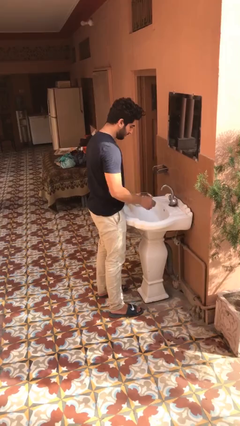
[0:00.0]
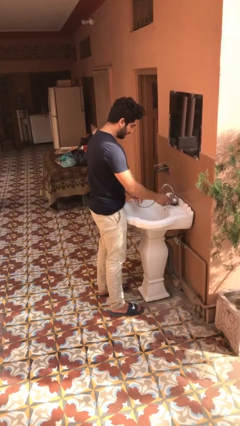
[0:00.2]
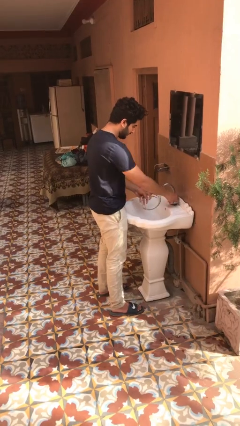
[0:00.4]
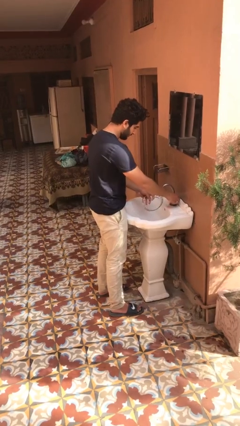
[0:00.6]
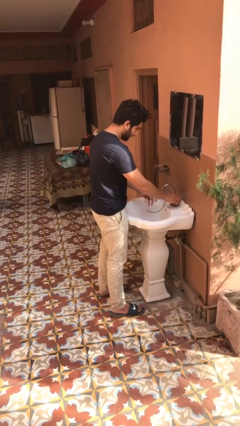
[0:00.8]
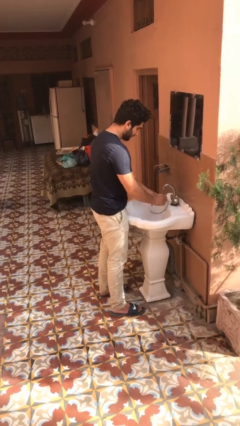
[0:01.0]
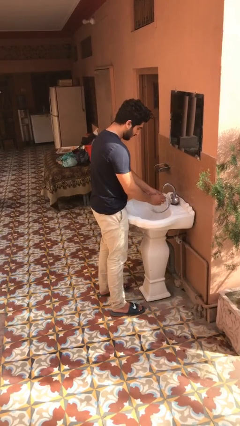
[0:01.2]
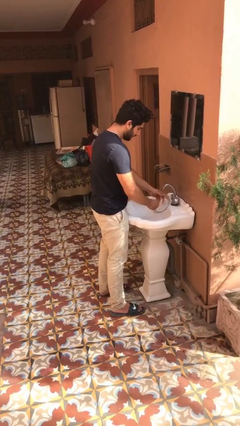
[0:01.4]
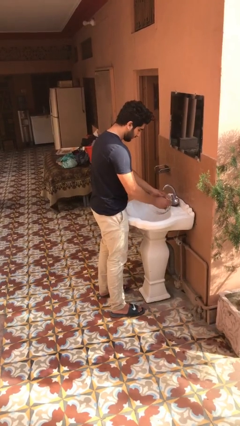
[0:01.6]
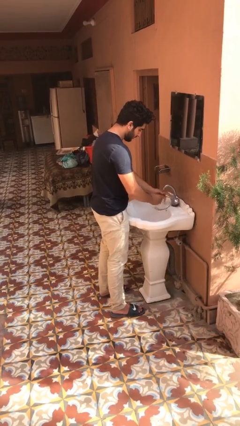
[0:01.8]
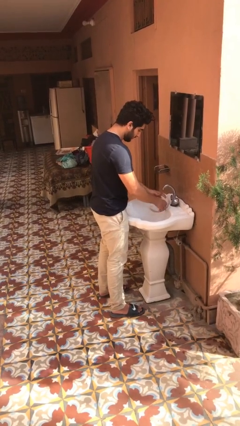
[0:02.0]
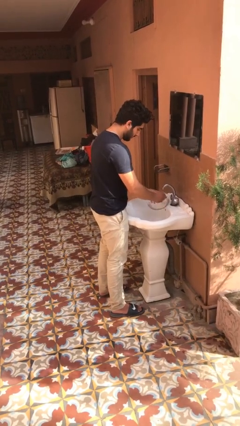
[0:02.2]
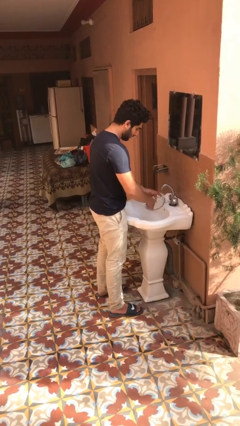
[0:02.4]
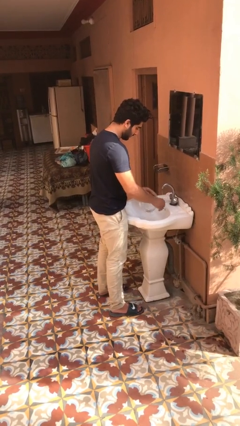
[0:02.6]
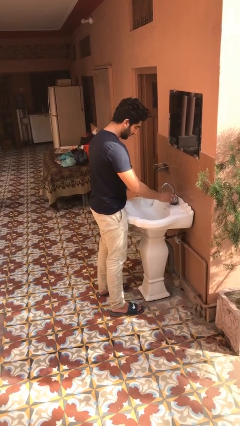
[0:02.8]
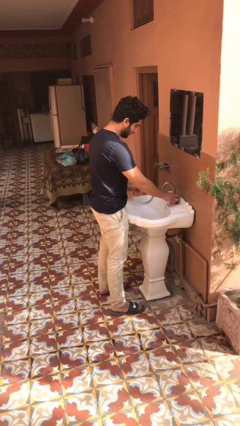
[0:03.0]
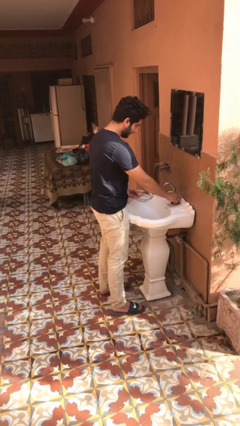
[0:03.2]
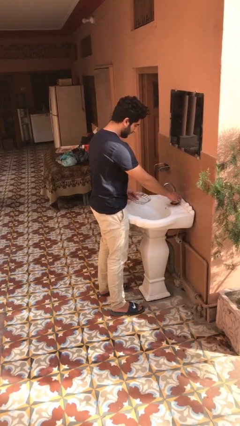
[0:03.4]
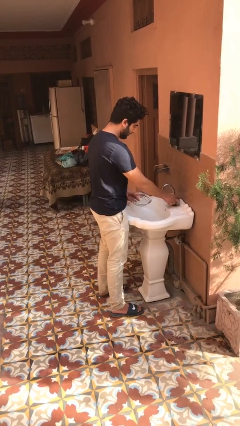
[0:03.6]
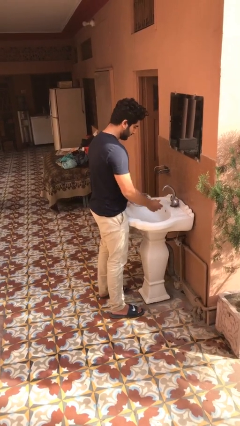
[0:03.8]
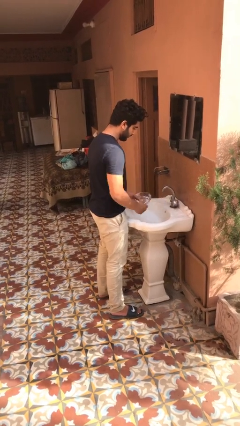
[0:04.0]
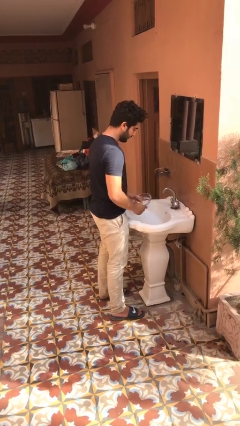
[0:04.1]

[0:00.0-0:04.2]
person washes dish

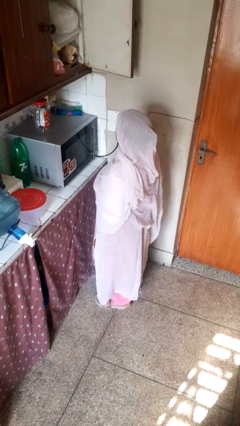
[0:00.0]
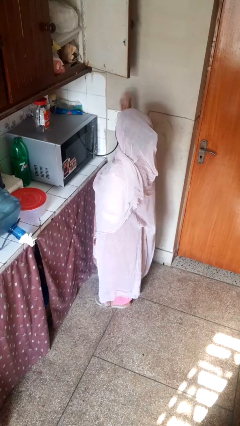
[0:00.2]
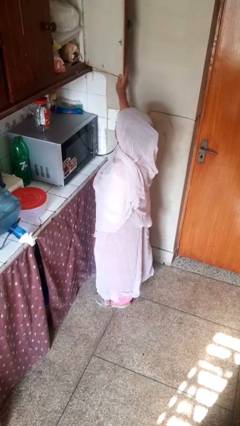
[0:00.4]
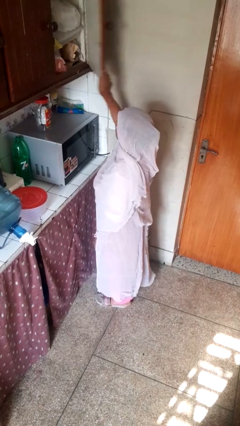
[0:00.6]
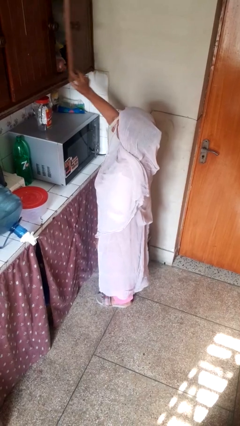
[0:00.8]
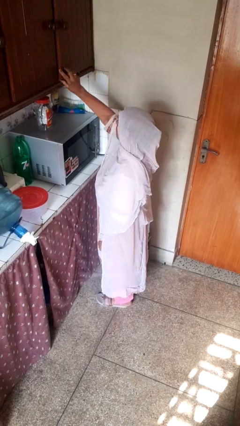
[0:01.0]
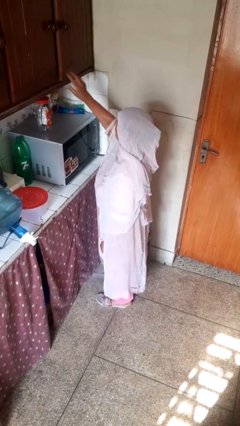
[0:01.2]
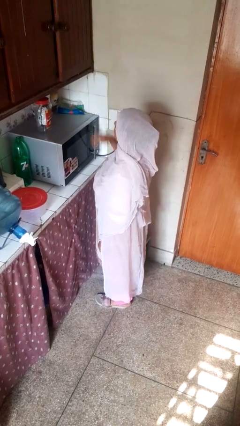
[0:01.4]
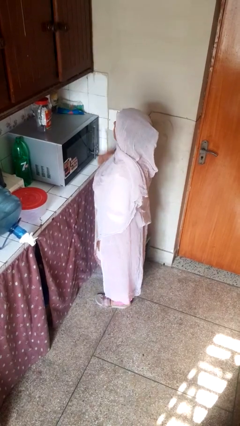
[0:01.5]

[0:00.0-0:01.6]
person closes cabinet

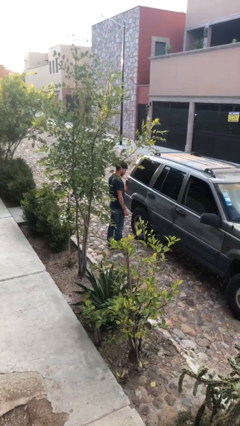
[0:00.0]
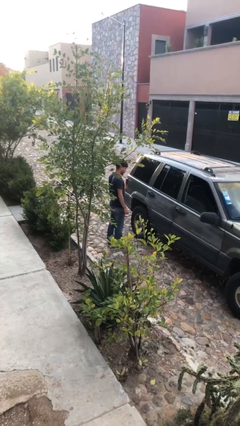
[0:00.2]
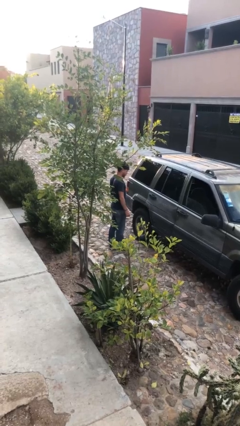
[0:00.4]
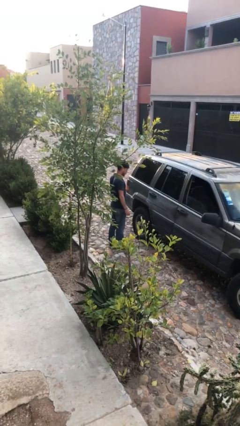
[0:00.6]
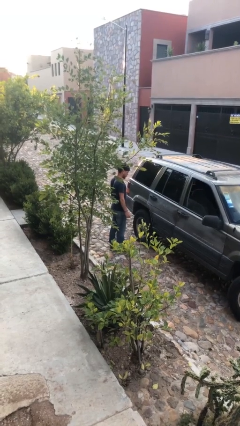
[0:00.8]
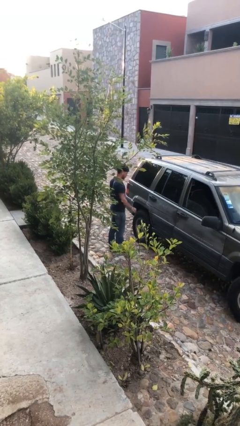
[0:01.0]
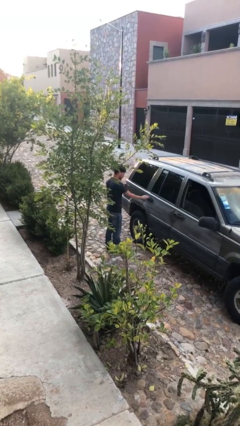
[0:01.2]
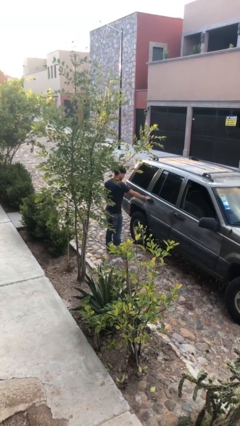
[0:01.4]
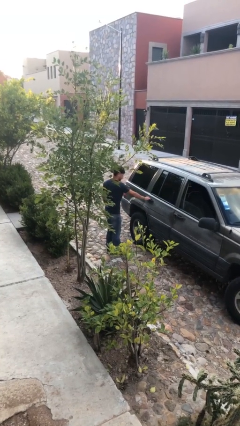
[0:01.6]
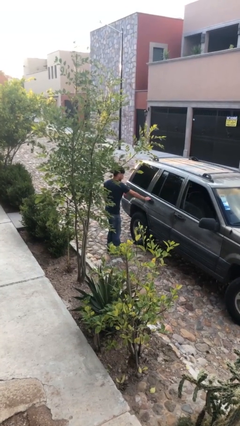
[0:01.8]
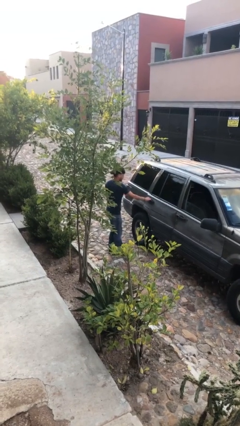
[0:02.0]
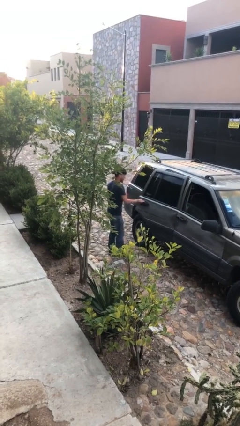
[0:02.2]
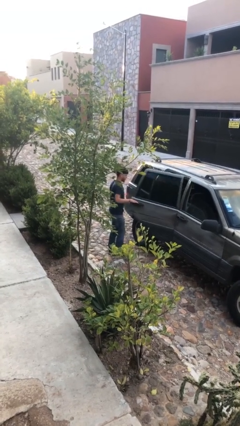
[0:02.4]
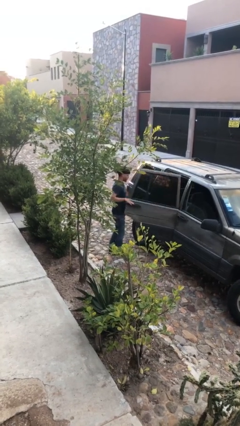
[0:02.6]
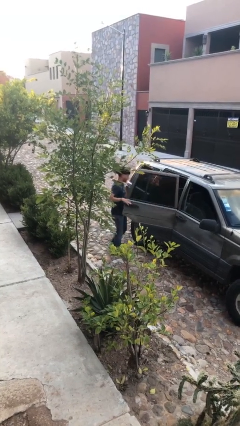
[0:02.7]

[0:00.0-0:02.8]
person opens car door

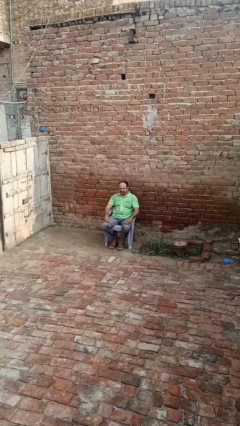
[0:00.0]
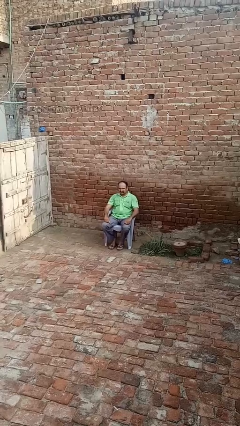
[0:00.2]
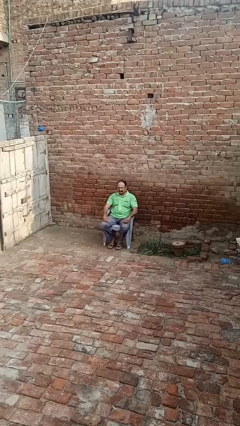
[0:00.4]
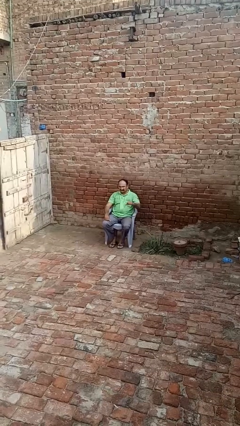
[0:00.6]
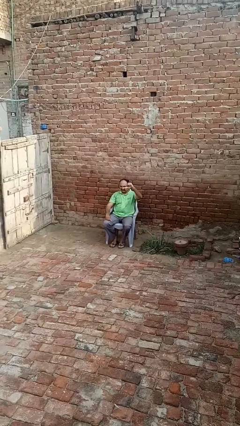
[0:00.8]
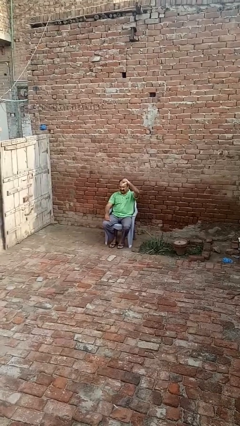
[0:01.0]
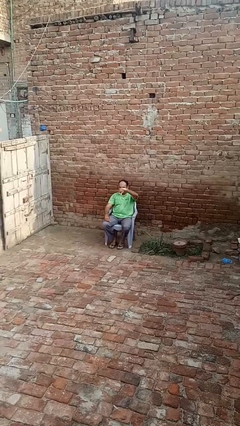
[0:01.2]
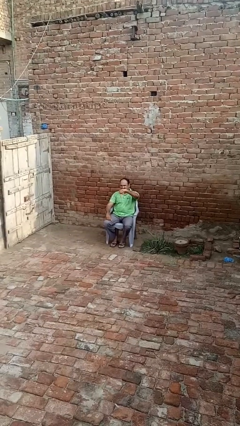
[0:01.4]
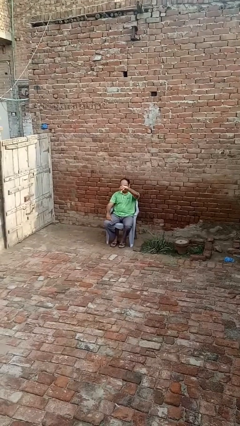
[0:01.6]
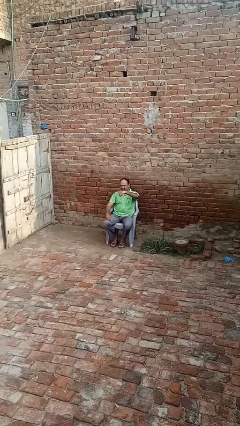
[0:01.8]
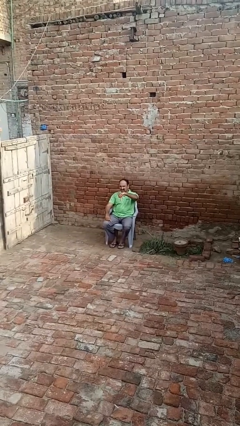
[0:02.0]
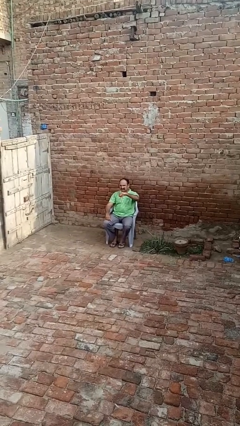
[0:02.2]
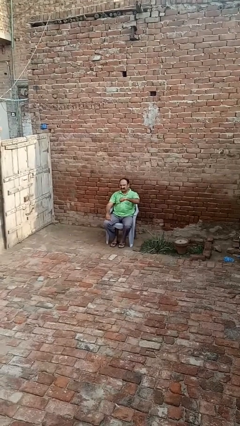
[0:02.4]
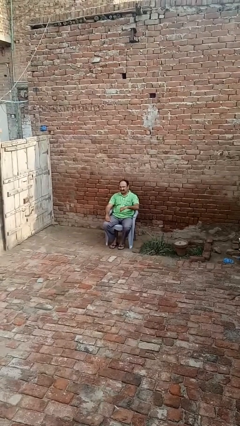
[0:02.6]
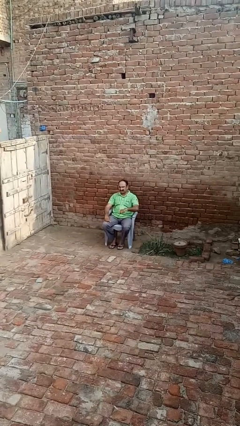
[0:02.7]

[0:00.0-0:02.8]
person gestures thumbs down

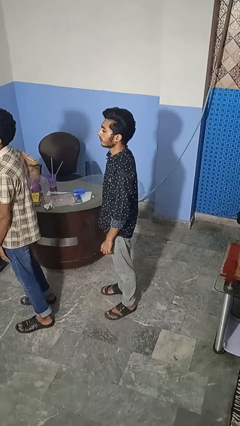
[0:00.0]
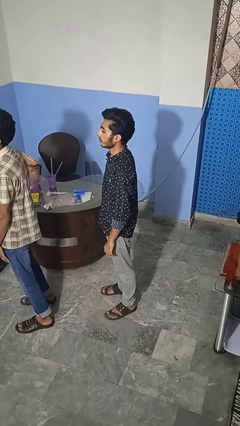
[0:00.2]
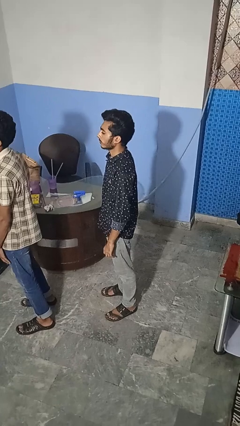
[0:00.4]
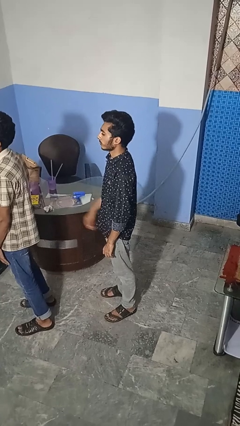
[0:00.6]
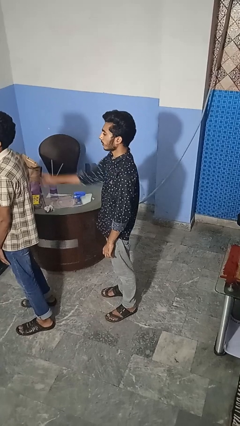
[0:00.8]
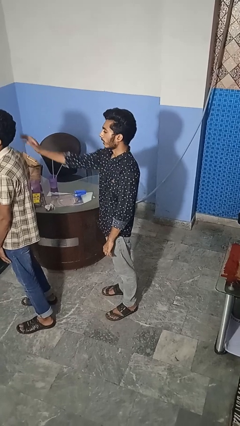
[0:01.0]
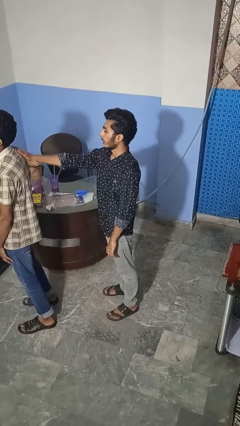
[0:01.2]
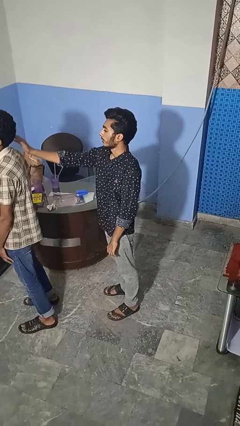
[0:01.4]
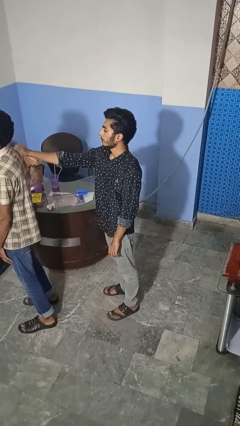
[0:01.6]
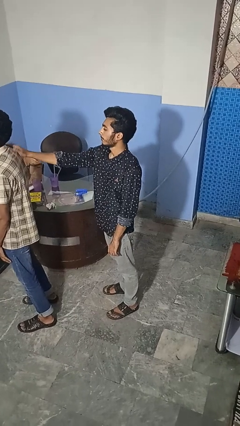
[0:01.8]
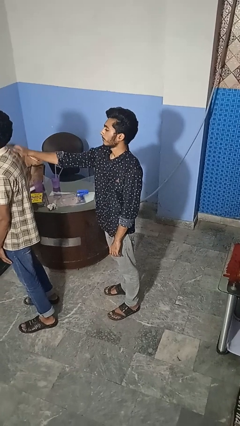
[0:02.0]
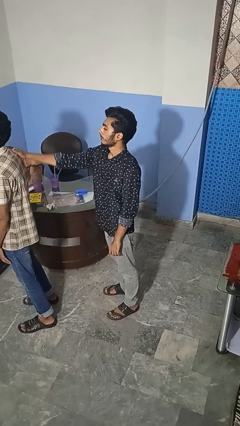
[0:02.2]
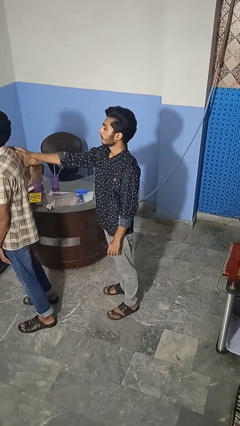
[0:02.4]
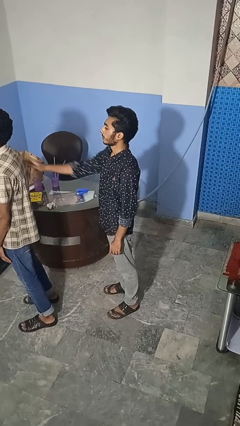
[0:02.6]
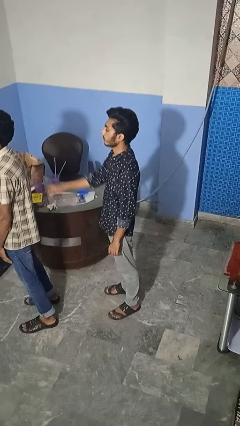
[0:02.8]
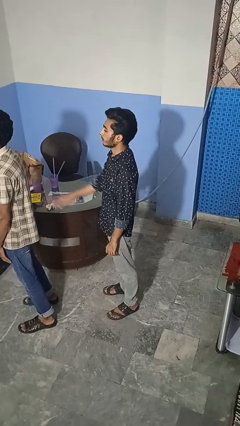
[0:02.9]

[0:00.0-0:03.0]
person touches back of person

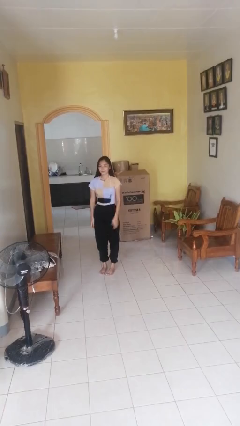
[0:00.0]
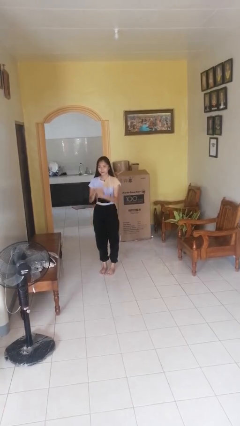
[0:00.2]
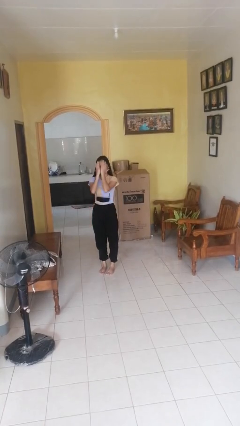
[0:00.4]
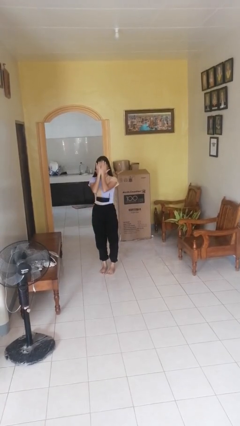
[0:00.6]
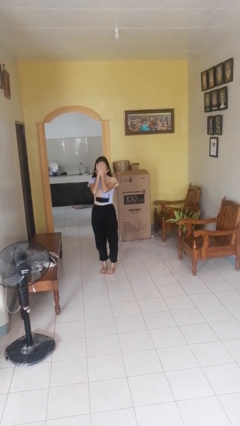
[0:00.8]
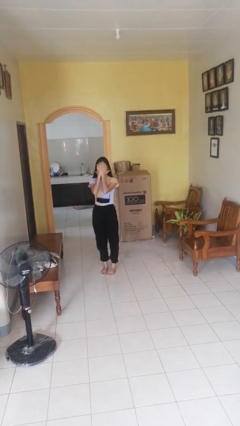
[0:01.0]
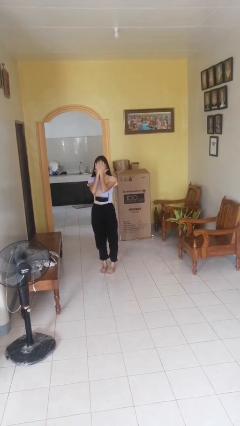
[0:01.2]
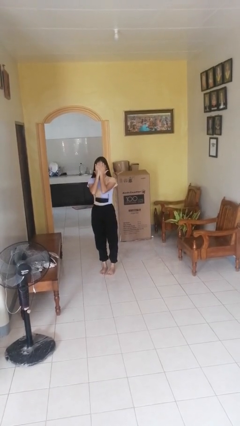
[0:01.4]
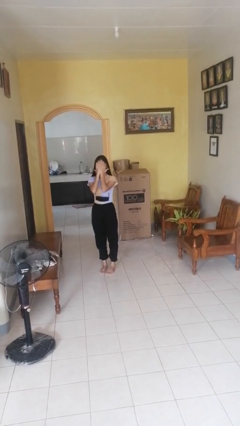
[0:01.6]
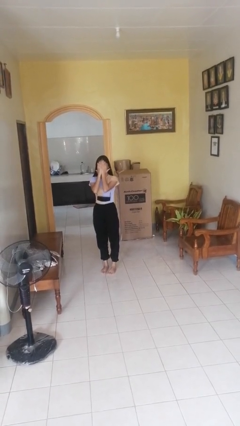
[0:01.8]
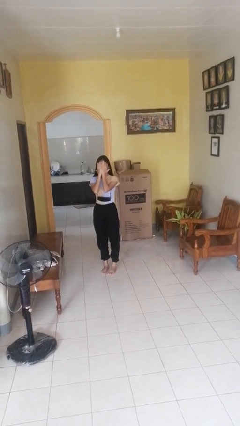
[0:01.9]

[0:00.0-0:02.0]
person covers face with hands

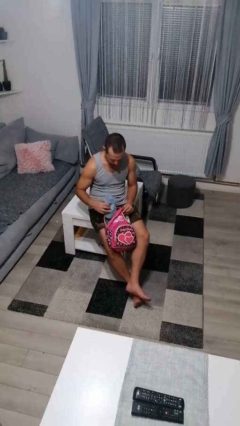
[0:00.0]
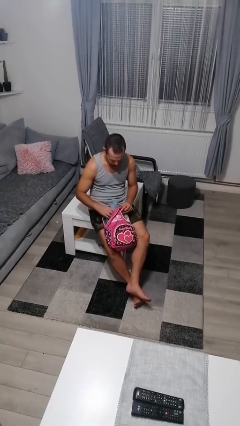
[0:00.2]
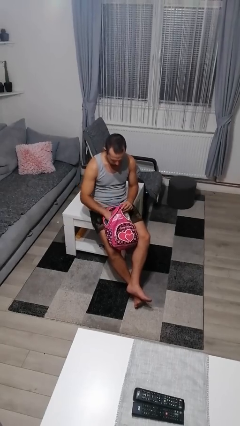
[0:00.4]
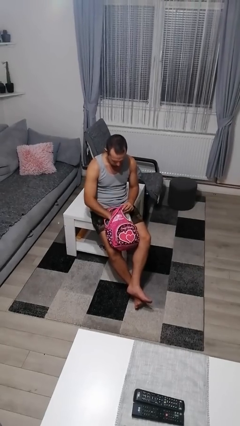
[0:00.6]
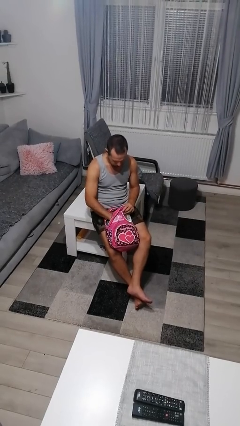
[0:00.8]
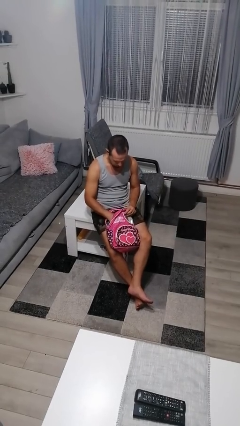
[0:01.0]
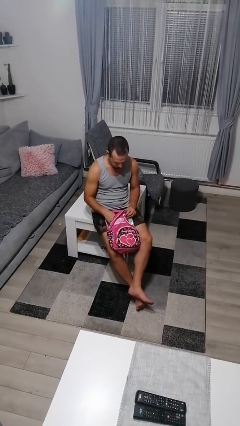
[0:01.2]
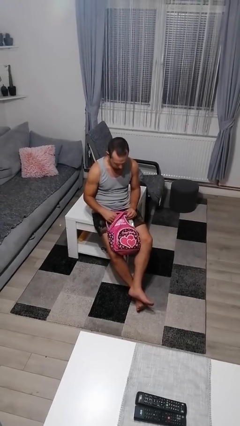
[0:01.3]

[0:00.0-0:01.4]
person puts object into backpack
